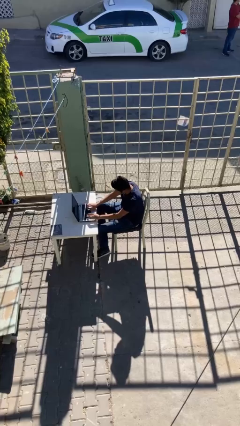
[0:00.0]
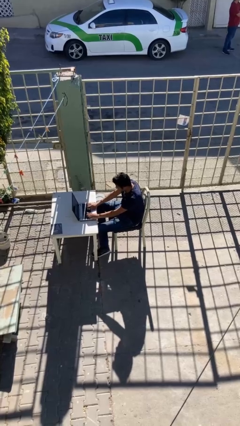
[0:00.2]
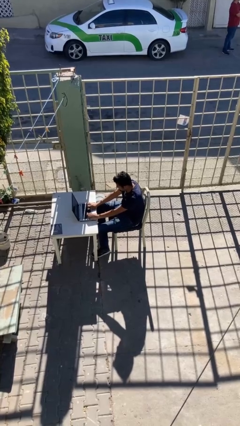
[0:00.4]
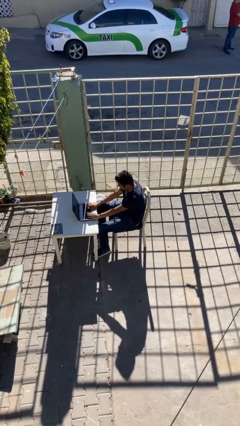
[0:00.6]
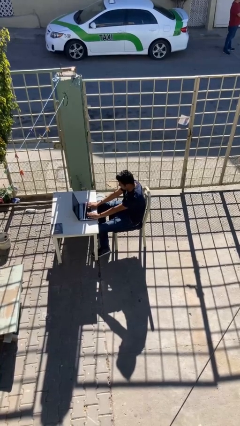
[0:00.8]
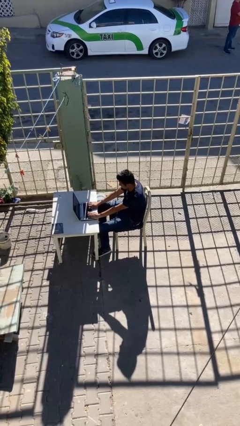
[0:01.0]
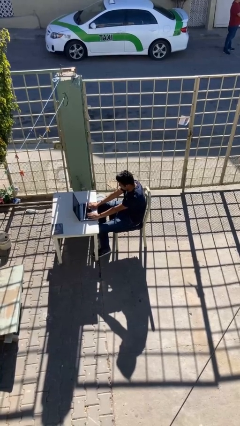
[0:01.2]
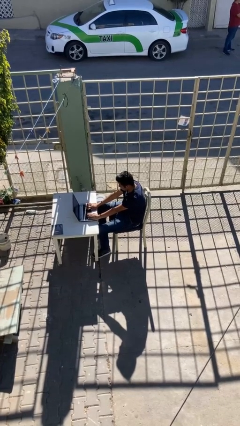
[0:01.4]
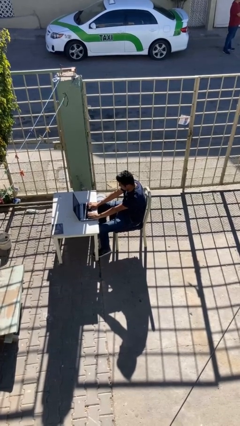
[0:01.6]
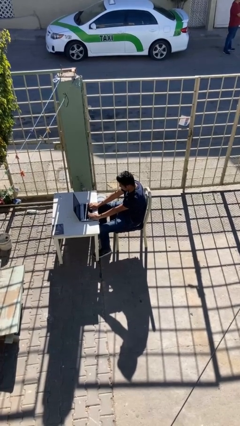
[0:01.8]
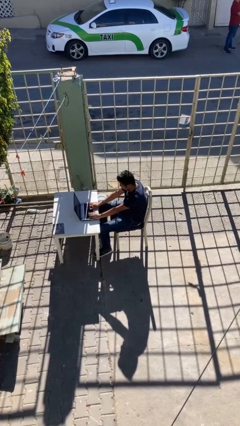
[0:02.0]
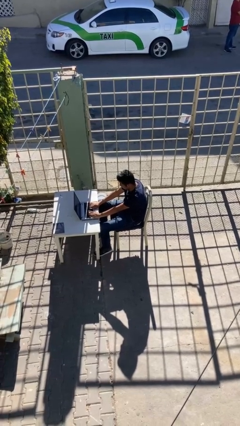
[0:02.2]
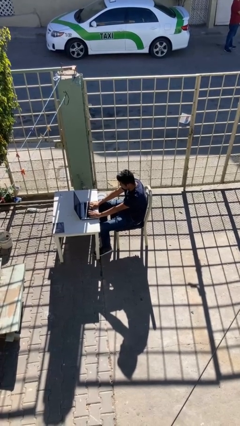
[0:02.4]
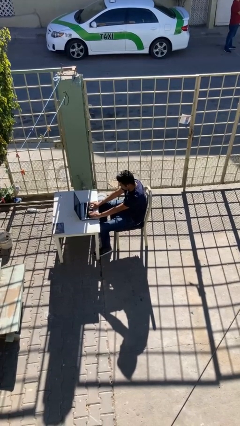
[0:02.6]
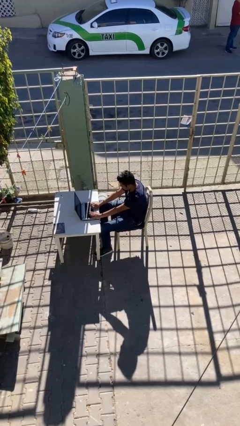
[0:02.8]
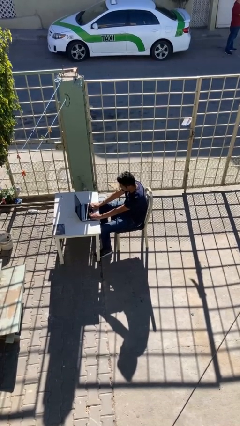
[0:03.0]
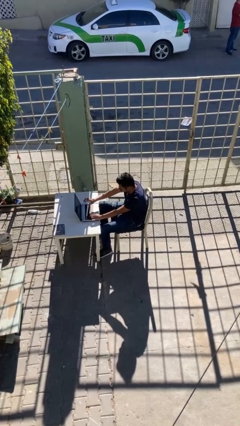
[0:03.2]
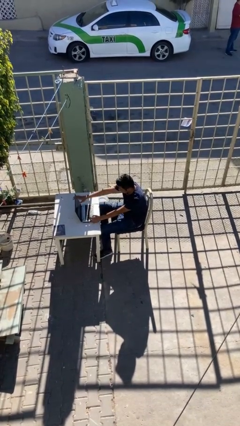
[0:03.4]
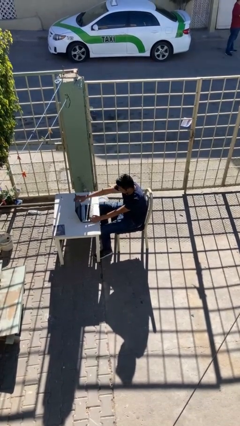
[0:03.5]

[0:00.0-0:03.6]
person interacts with laptop

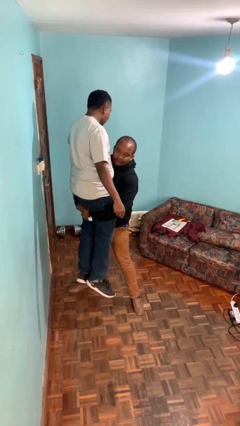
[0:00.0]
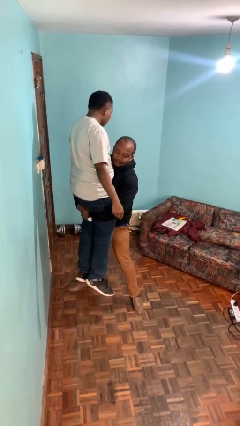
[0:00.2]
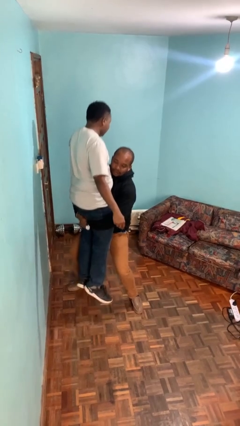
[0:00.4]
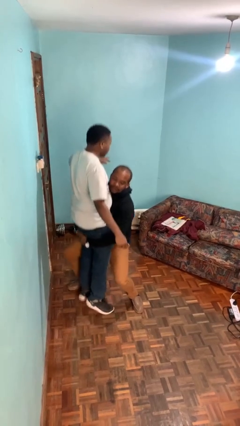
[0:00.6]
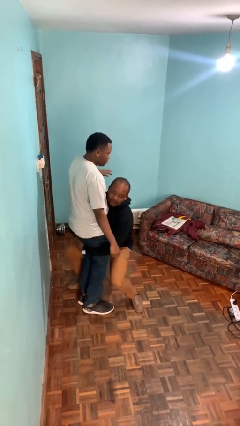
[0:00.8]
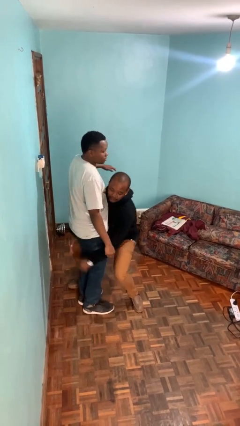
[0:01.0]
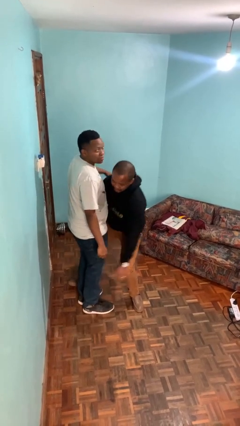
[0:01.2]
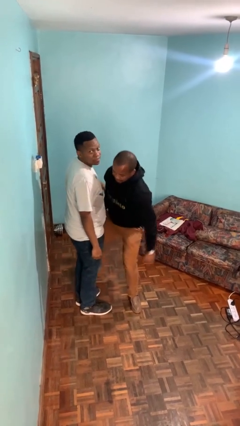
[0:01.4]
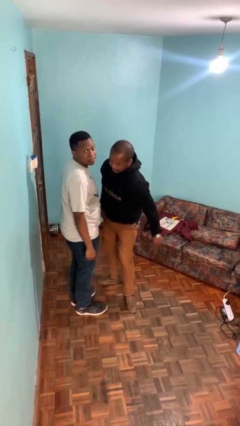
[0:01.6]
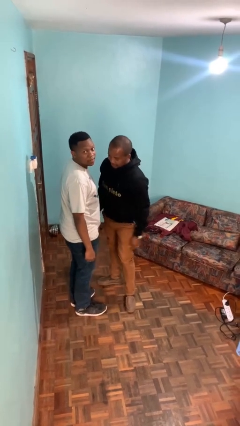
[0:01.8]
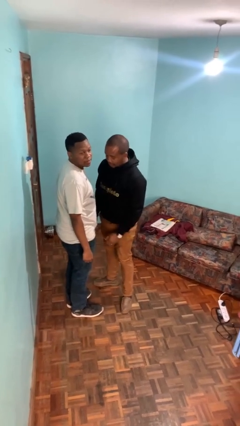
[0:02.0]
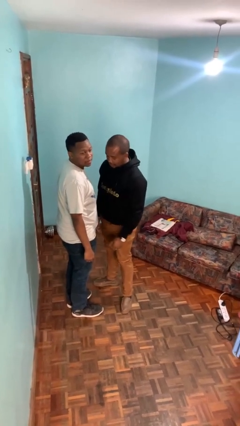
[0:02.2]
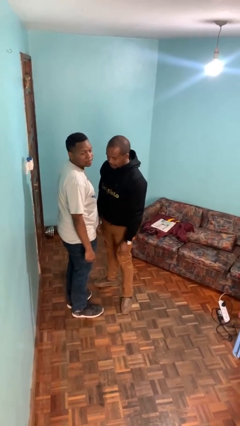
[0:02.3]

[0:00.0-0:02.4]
person puts down person

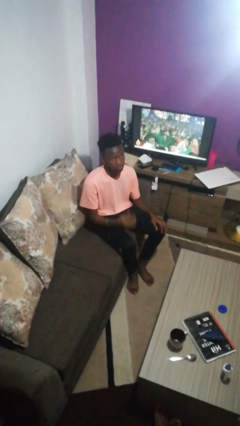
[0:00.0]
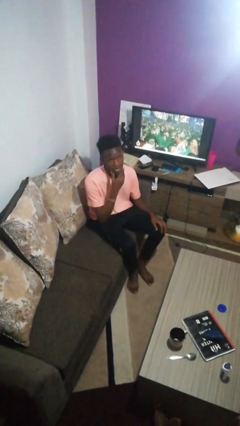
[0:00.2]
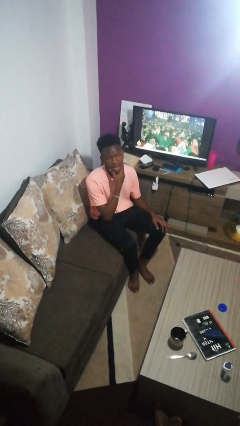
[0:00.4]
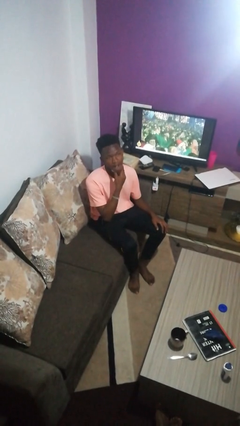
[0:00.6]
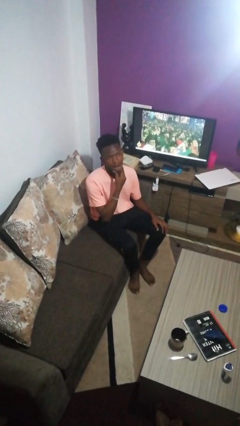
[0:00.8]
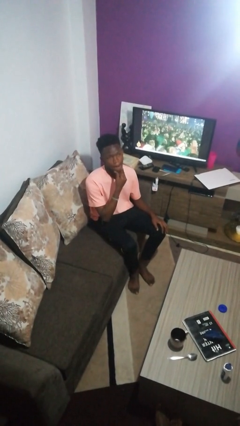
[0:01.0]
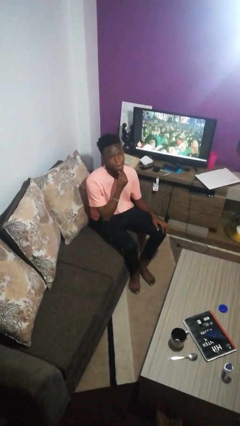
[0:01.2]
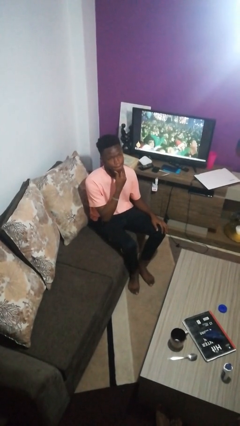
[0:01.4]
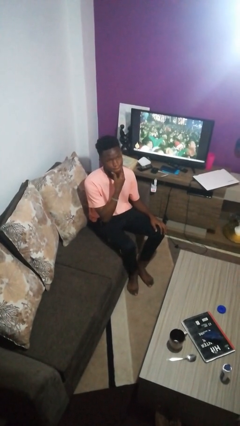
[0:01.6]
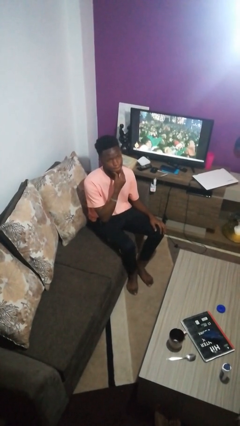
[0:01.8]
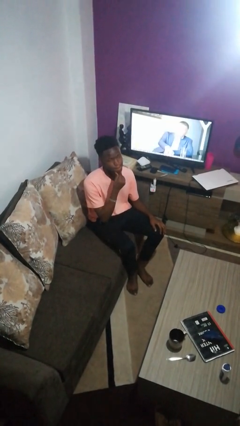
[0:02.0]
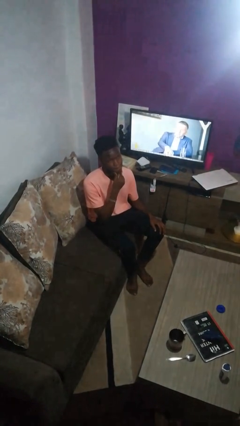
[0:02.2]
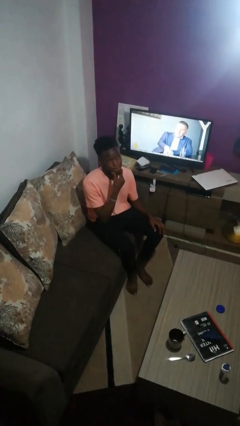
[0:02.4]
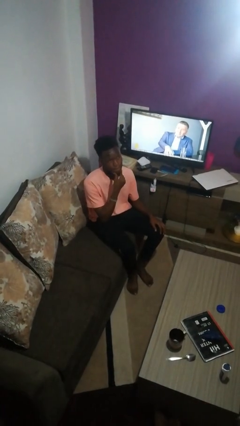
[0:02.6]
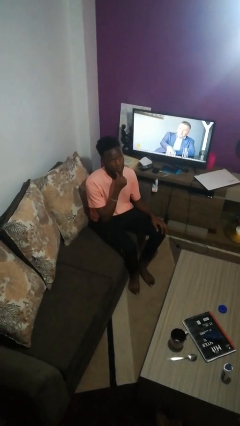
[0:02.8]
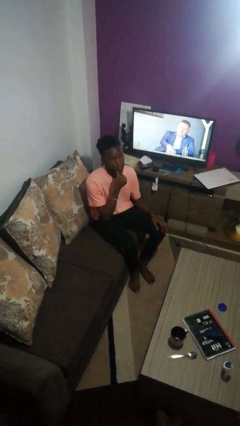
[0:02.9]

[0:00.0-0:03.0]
person strokes chin

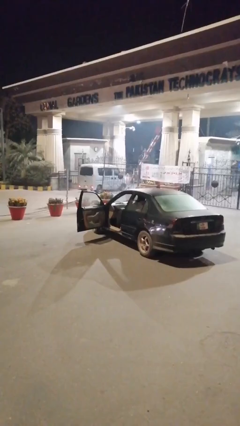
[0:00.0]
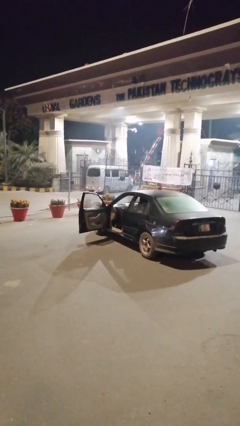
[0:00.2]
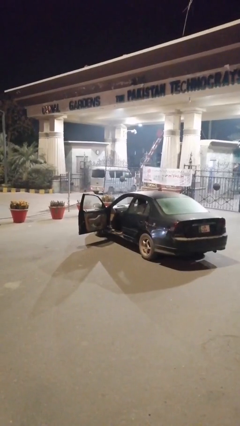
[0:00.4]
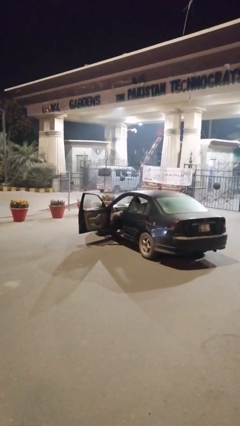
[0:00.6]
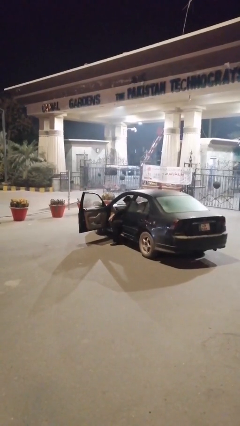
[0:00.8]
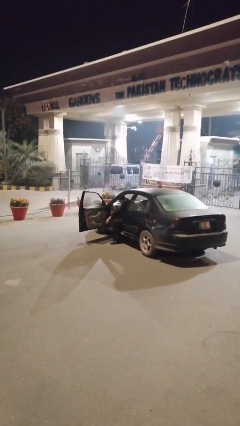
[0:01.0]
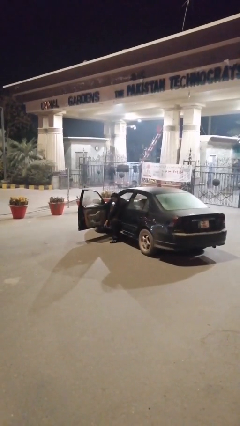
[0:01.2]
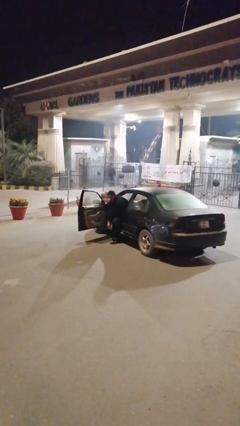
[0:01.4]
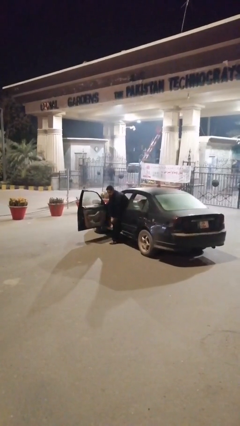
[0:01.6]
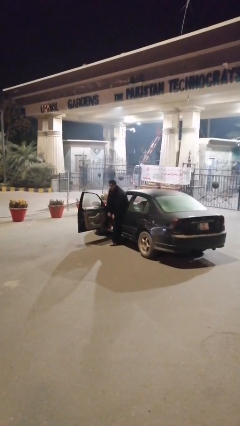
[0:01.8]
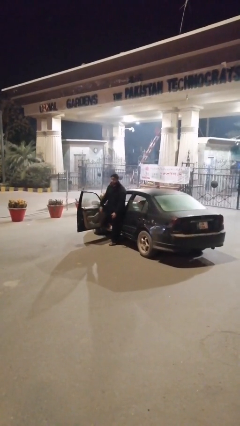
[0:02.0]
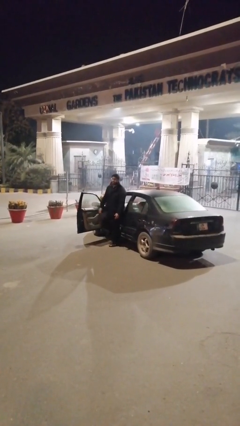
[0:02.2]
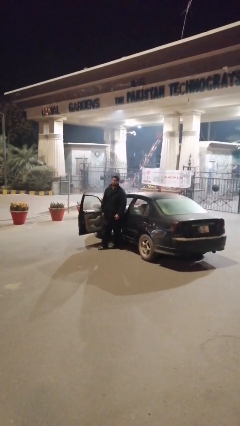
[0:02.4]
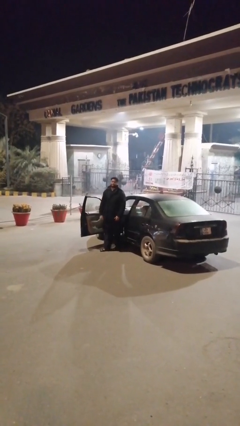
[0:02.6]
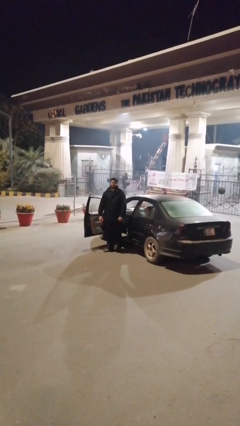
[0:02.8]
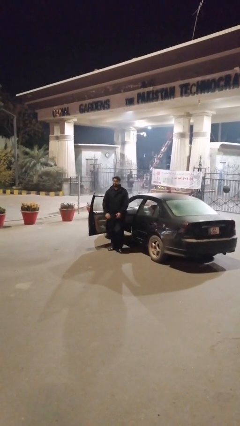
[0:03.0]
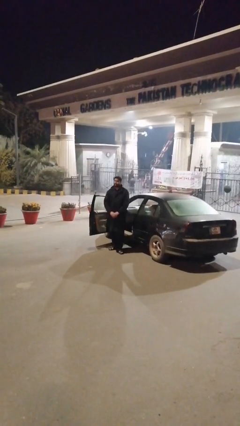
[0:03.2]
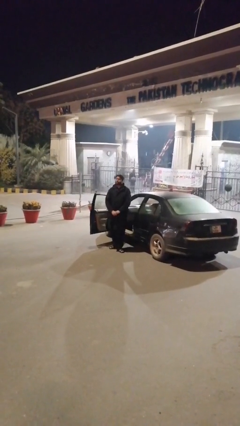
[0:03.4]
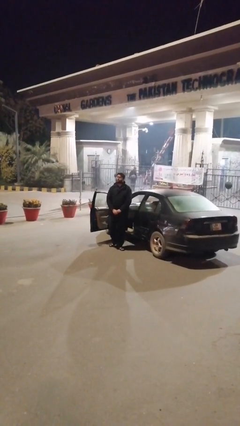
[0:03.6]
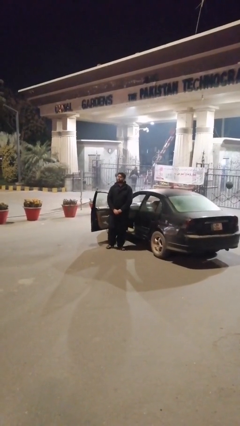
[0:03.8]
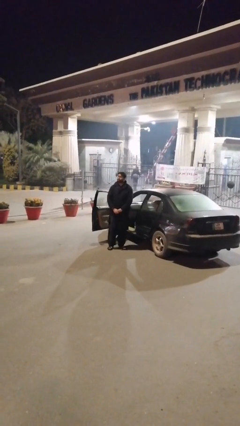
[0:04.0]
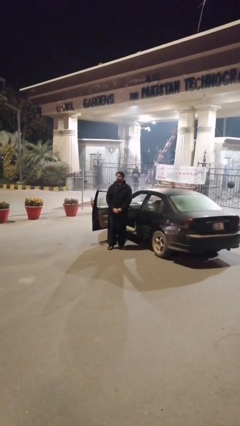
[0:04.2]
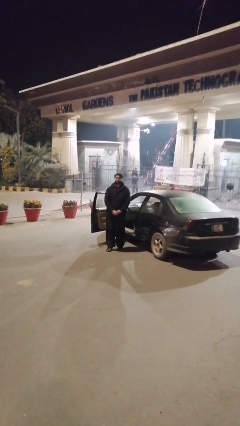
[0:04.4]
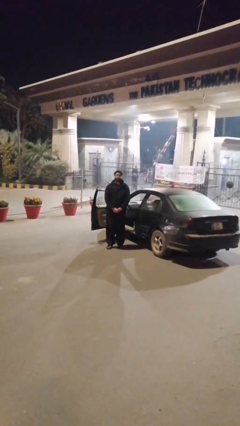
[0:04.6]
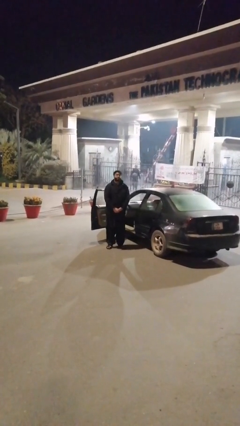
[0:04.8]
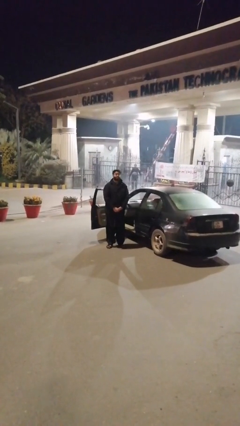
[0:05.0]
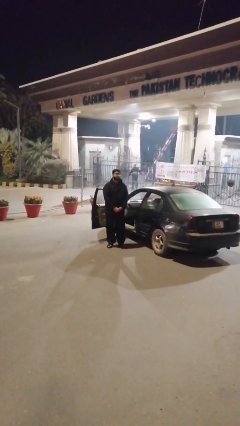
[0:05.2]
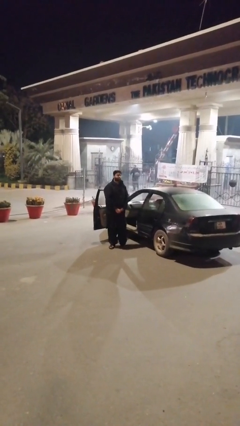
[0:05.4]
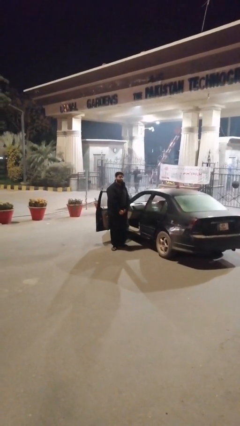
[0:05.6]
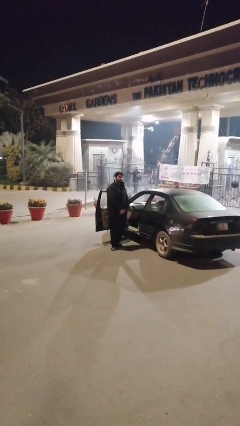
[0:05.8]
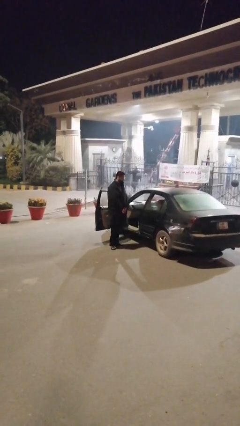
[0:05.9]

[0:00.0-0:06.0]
person exits car

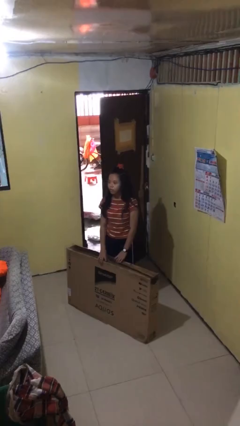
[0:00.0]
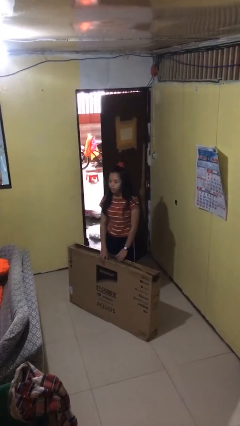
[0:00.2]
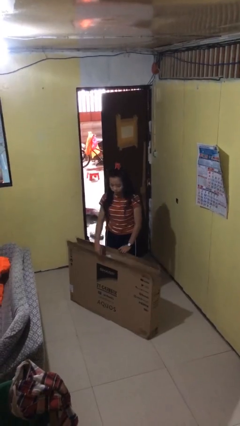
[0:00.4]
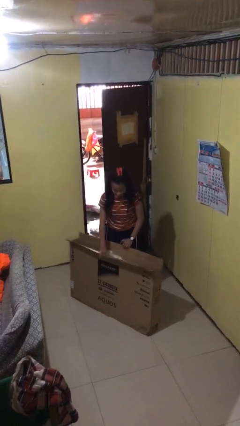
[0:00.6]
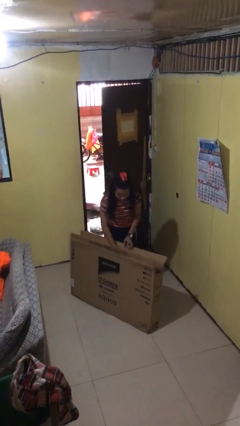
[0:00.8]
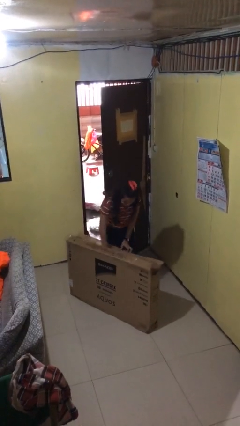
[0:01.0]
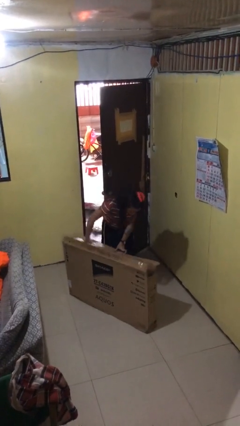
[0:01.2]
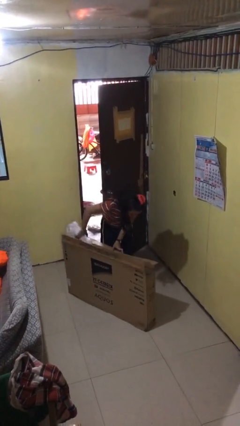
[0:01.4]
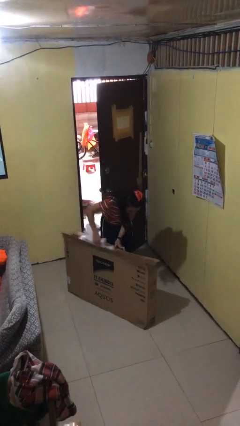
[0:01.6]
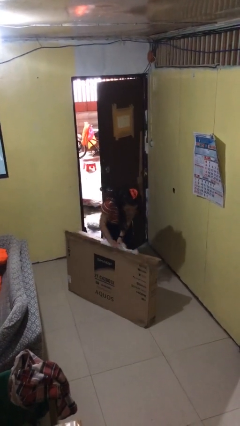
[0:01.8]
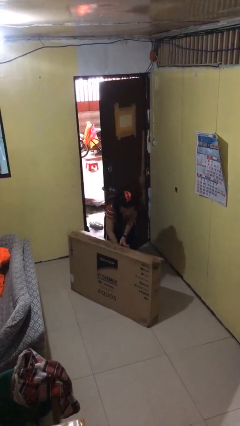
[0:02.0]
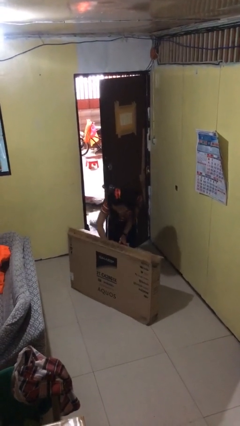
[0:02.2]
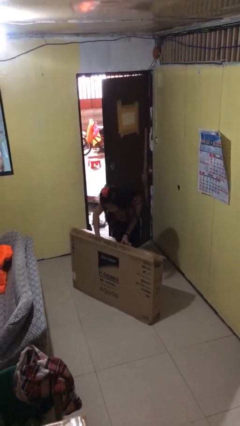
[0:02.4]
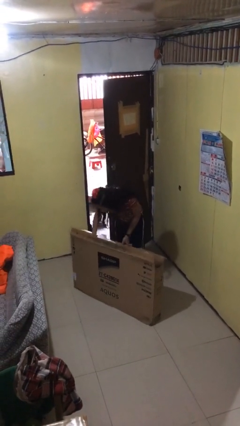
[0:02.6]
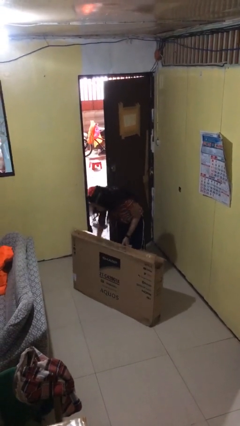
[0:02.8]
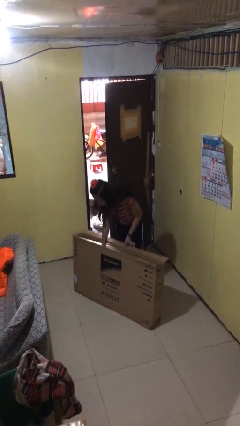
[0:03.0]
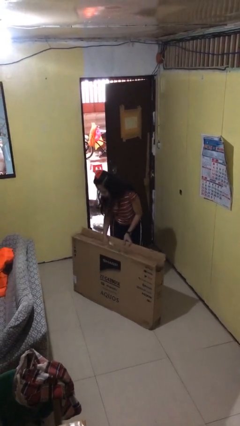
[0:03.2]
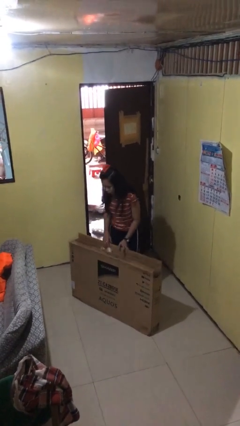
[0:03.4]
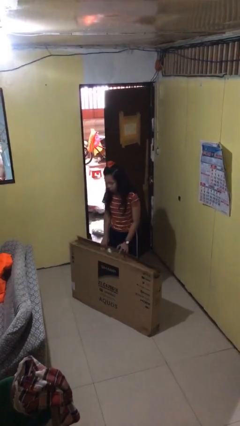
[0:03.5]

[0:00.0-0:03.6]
person searches in box
